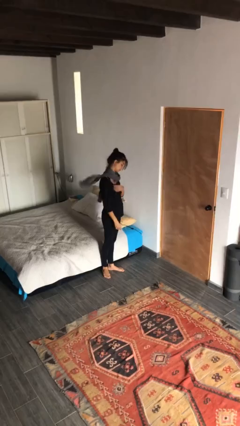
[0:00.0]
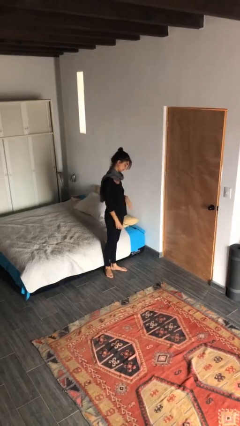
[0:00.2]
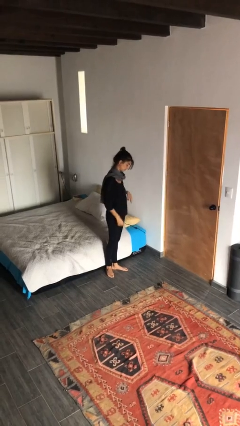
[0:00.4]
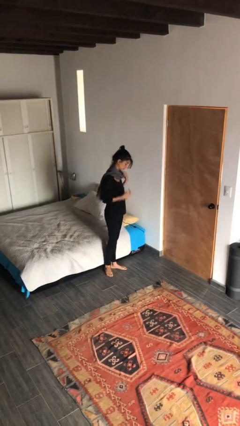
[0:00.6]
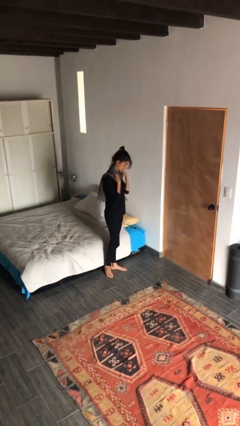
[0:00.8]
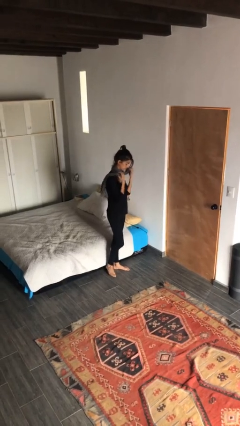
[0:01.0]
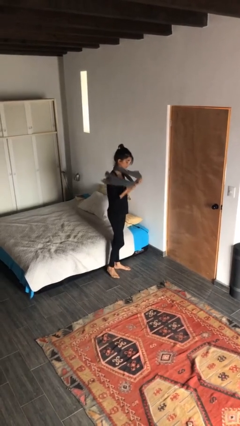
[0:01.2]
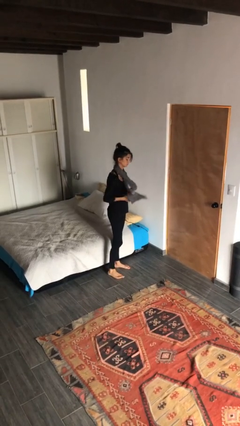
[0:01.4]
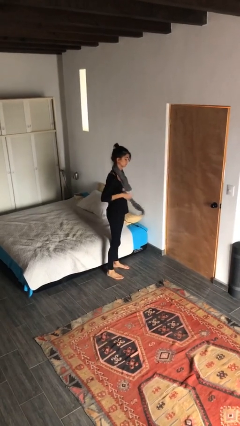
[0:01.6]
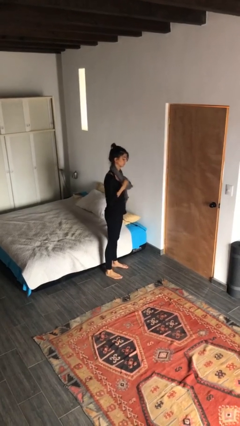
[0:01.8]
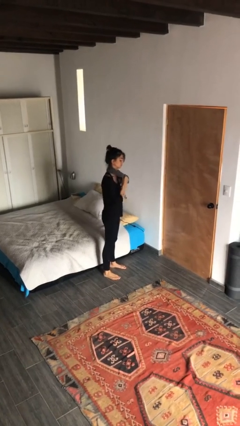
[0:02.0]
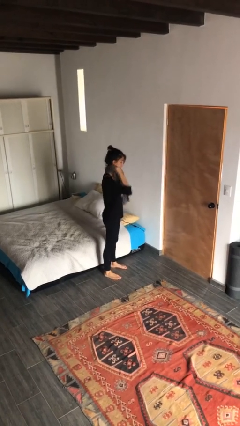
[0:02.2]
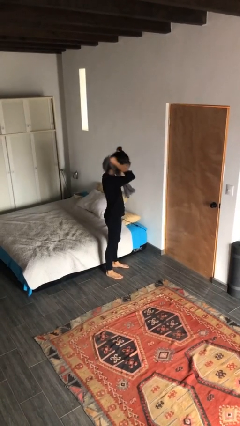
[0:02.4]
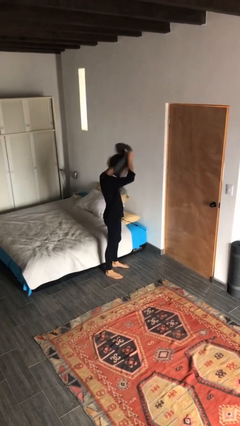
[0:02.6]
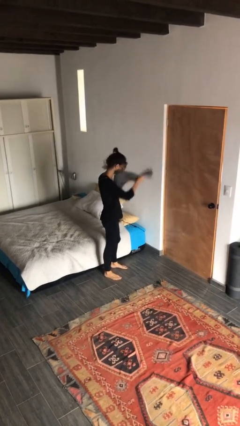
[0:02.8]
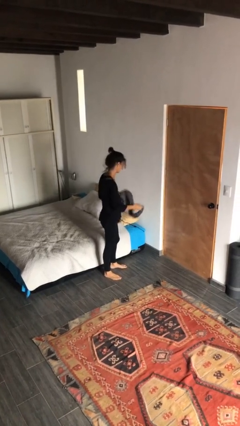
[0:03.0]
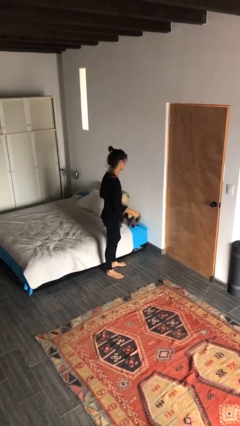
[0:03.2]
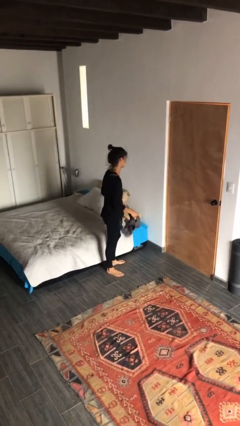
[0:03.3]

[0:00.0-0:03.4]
person takes off scarf

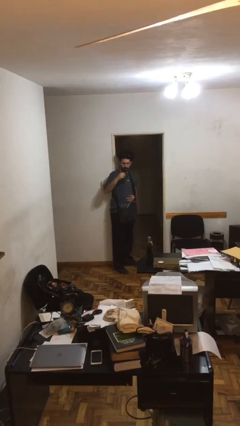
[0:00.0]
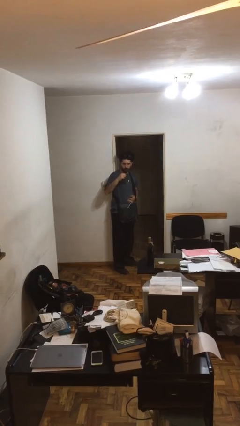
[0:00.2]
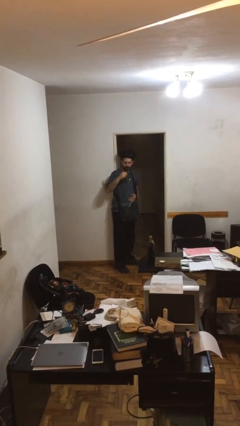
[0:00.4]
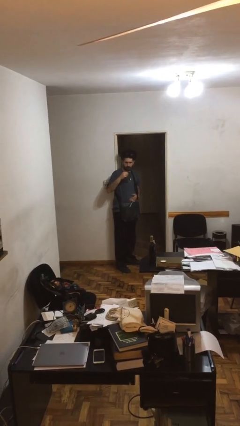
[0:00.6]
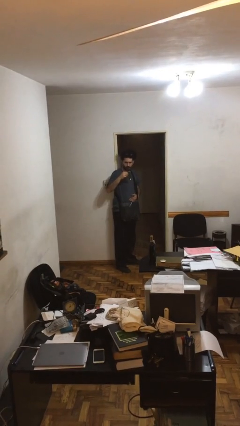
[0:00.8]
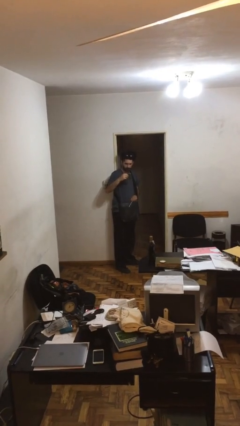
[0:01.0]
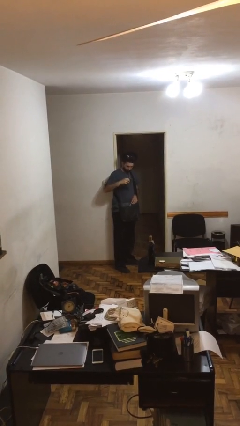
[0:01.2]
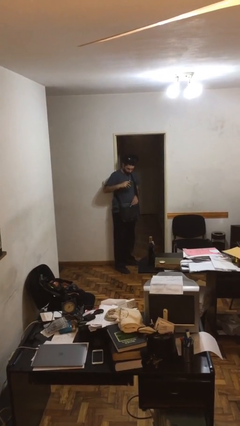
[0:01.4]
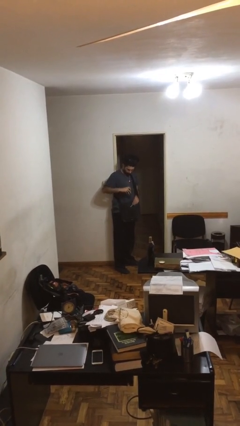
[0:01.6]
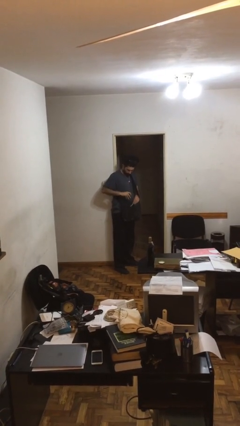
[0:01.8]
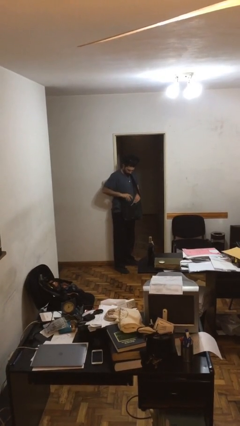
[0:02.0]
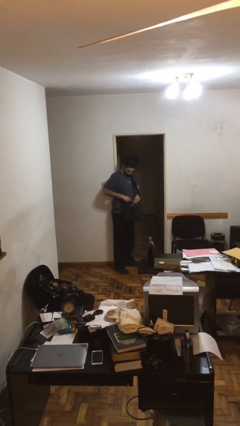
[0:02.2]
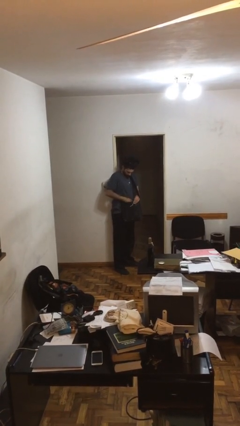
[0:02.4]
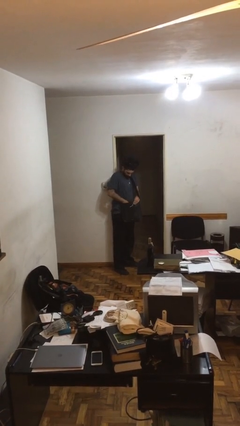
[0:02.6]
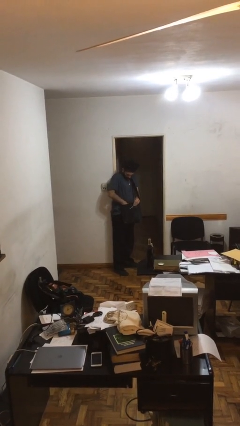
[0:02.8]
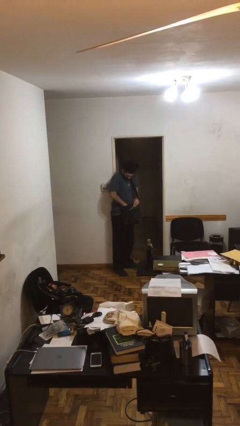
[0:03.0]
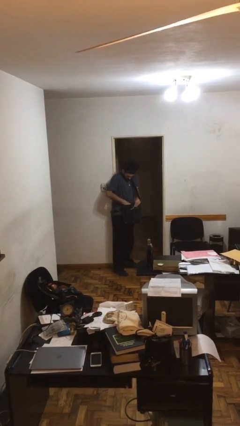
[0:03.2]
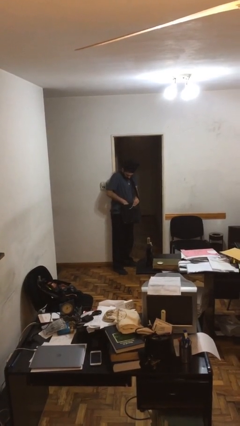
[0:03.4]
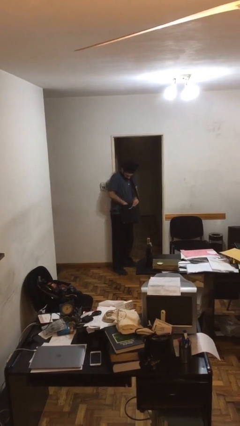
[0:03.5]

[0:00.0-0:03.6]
person puts object into purse

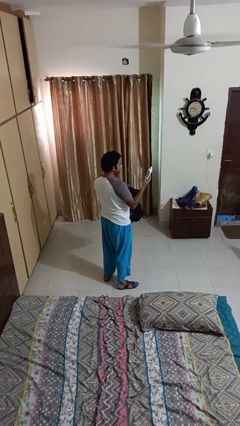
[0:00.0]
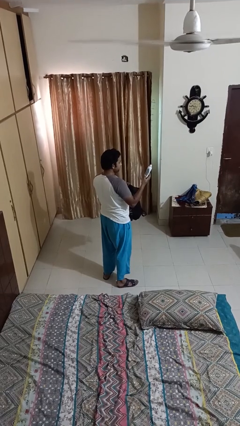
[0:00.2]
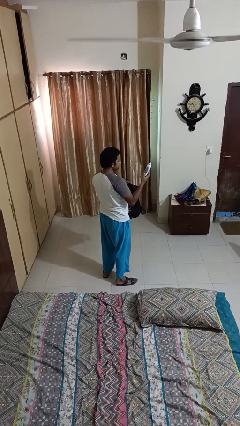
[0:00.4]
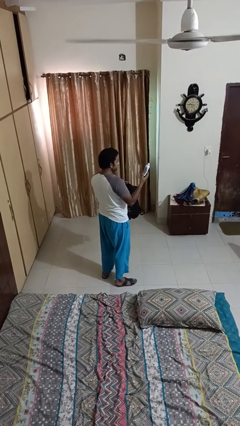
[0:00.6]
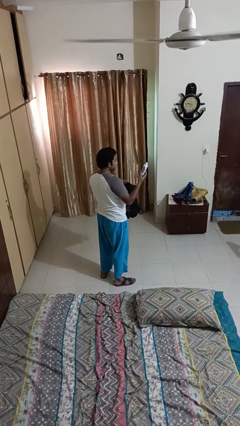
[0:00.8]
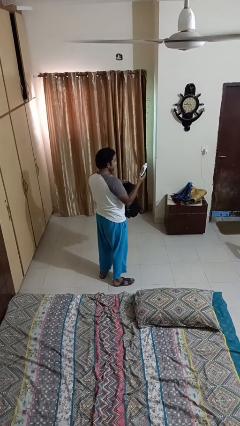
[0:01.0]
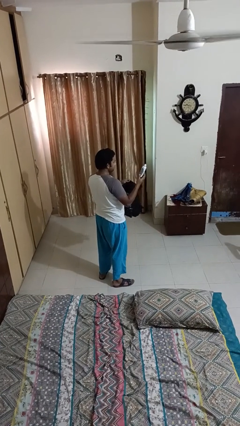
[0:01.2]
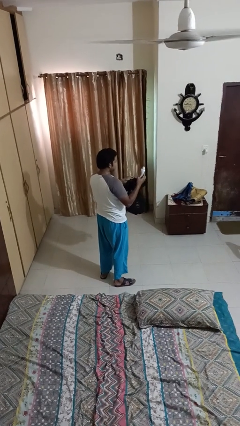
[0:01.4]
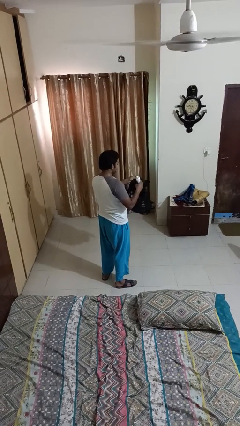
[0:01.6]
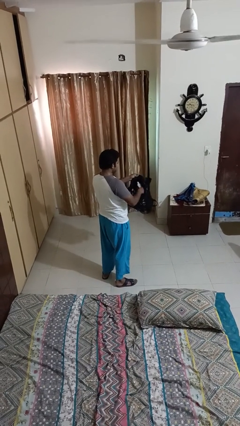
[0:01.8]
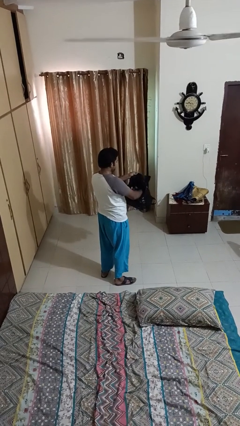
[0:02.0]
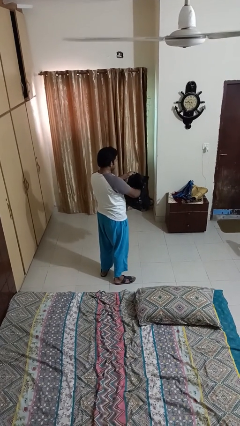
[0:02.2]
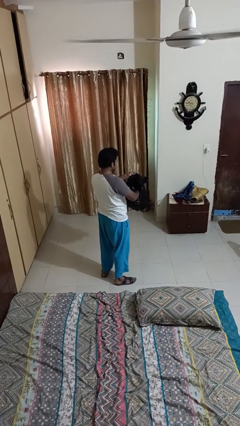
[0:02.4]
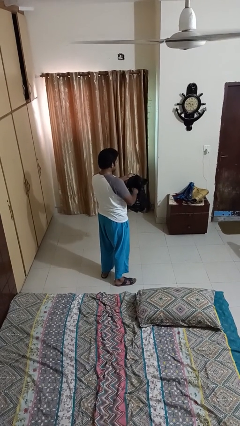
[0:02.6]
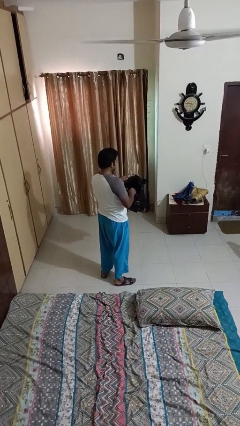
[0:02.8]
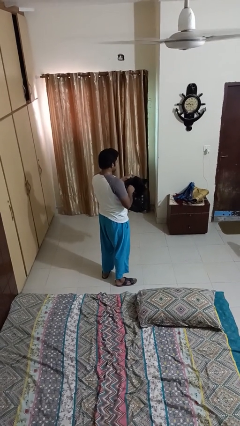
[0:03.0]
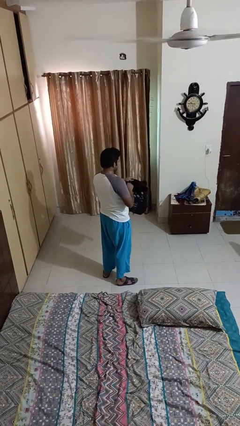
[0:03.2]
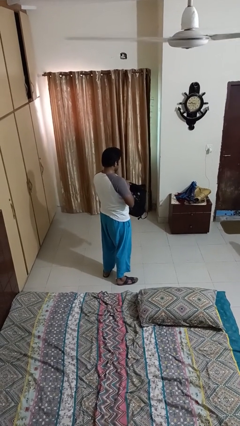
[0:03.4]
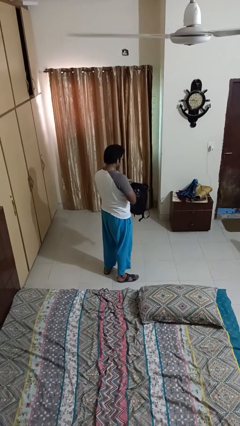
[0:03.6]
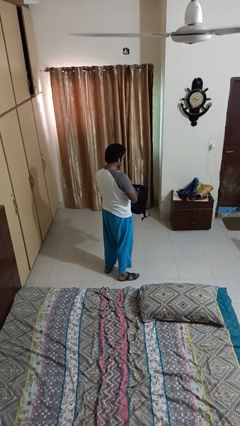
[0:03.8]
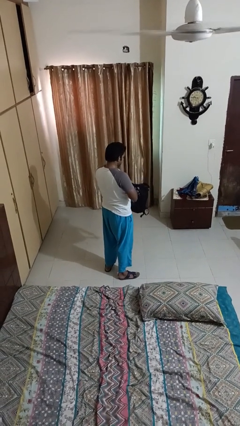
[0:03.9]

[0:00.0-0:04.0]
person stands up

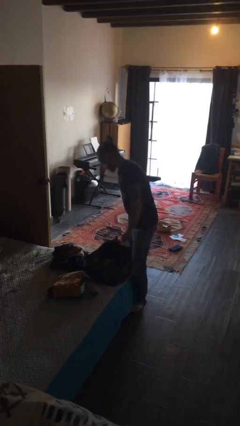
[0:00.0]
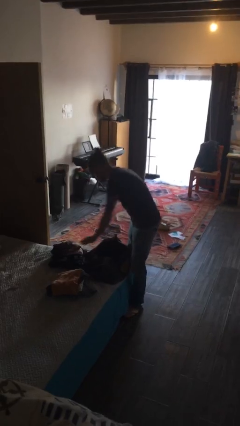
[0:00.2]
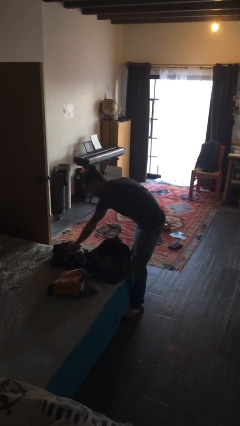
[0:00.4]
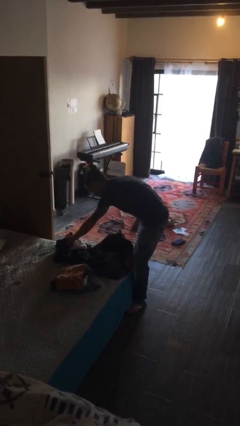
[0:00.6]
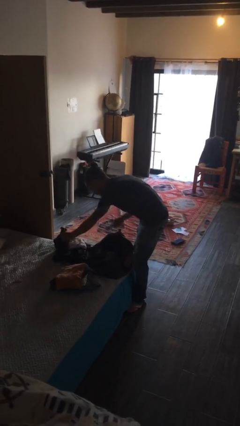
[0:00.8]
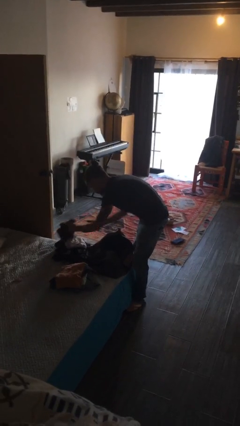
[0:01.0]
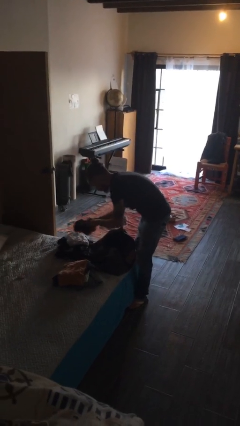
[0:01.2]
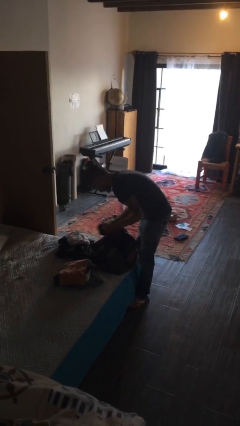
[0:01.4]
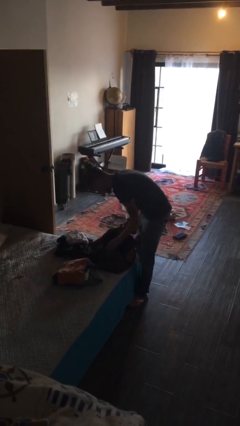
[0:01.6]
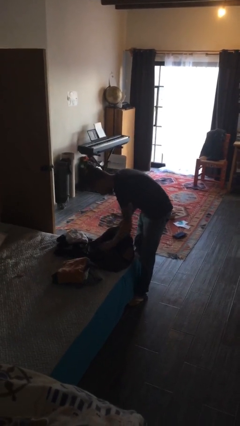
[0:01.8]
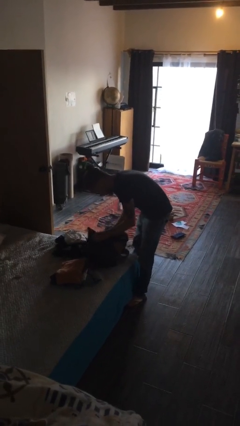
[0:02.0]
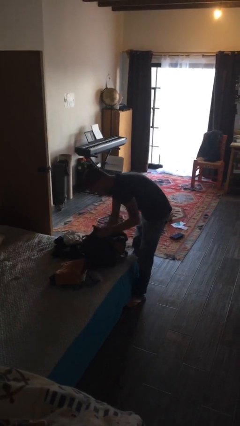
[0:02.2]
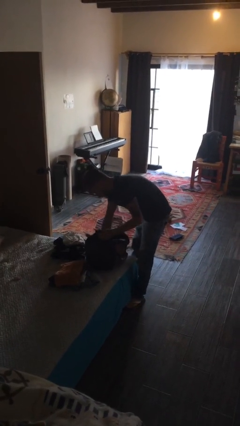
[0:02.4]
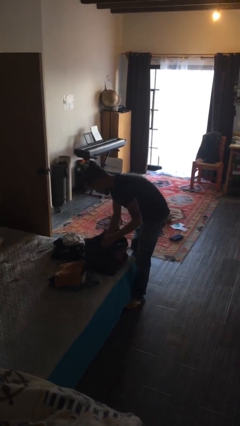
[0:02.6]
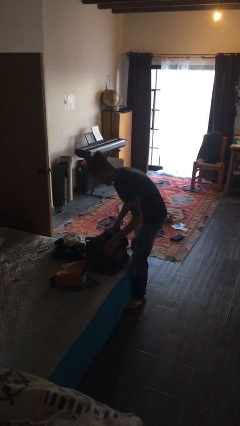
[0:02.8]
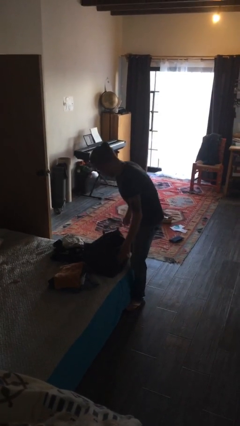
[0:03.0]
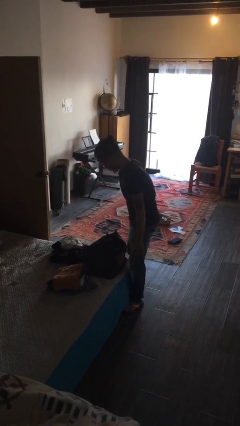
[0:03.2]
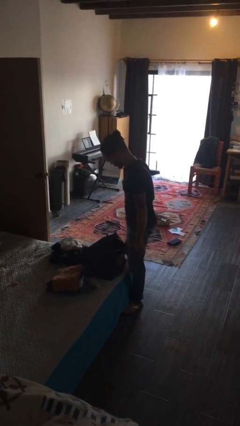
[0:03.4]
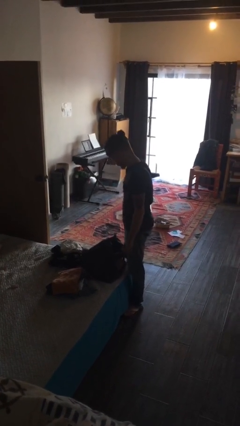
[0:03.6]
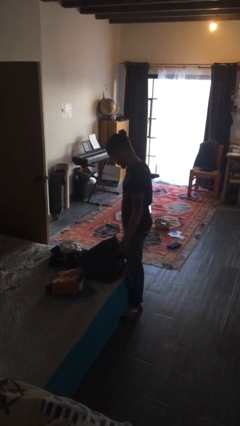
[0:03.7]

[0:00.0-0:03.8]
person loads clothes into suitcase

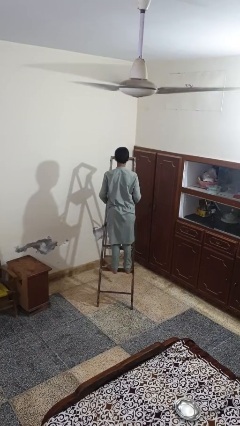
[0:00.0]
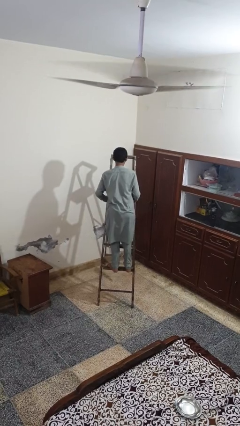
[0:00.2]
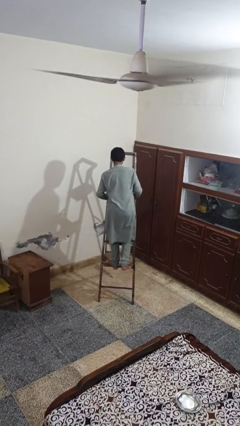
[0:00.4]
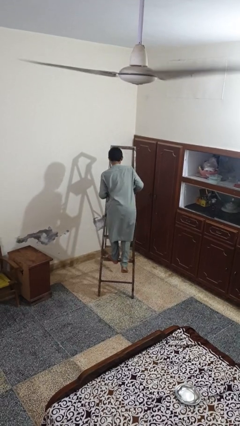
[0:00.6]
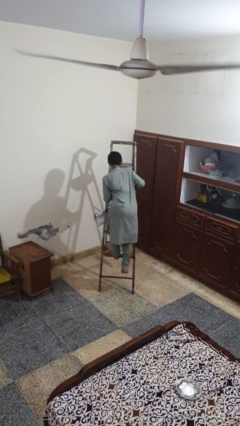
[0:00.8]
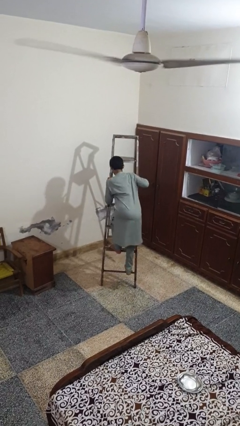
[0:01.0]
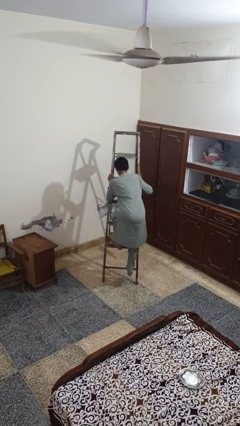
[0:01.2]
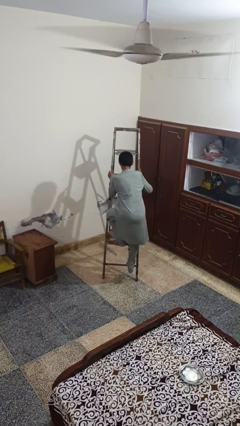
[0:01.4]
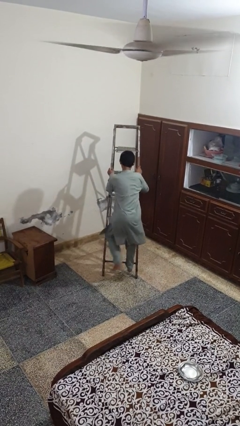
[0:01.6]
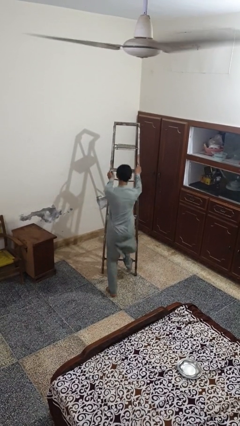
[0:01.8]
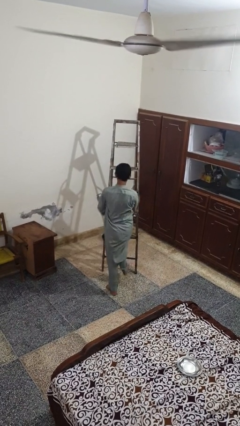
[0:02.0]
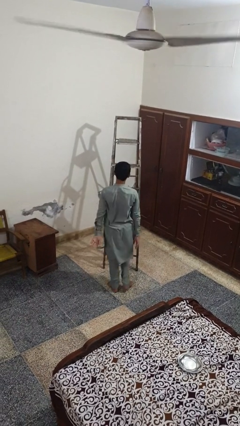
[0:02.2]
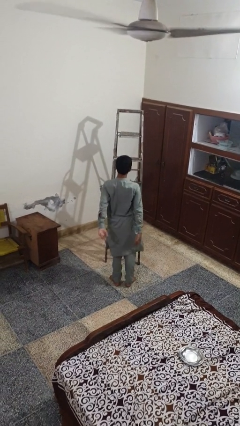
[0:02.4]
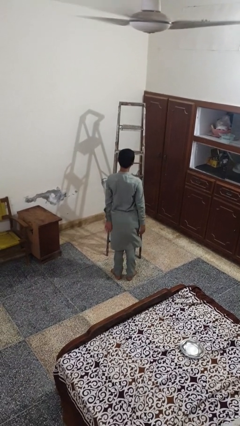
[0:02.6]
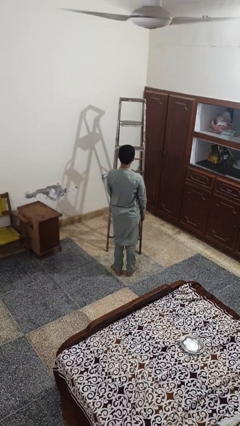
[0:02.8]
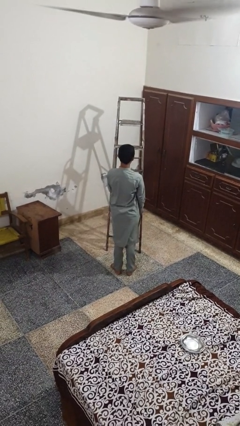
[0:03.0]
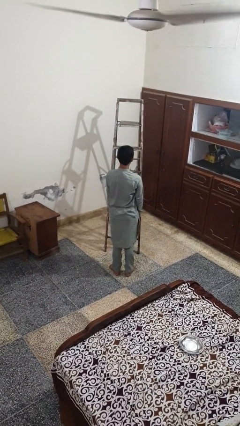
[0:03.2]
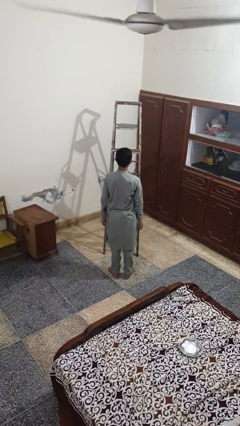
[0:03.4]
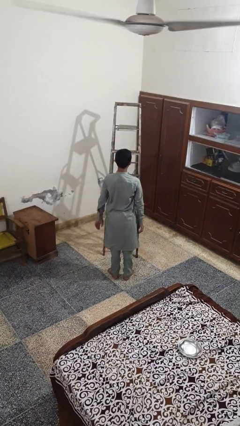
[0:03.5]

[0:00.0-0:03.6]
person climbs down ladder
